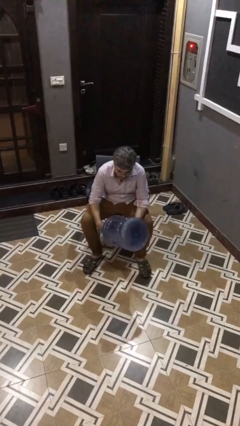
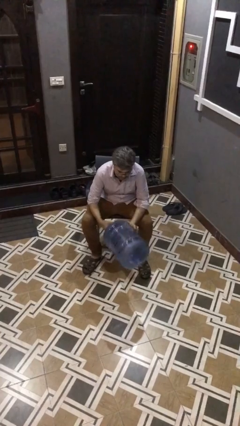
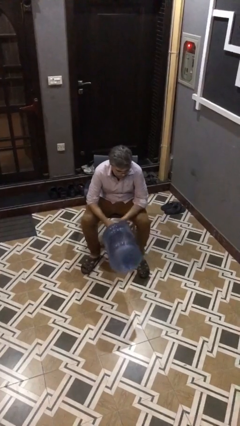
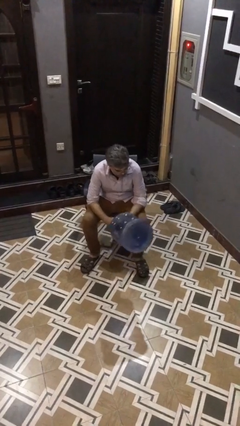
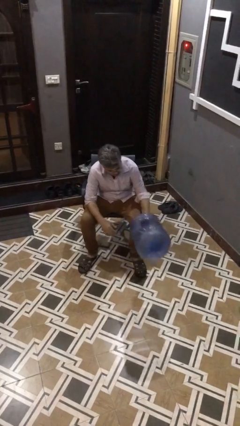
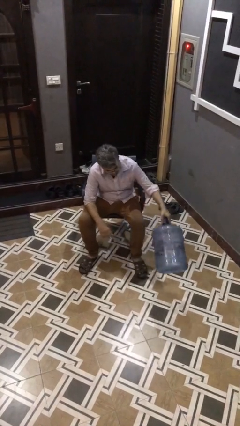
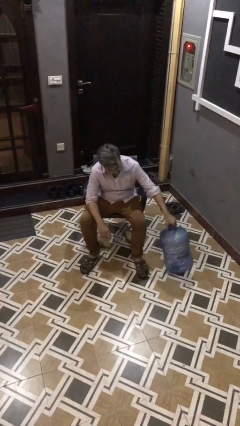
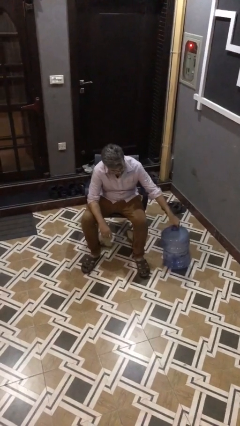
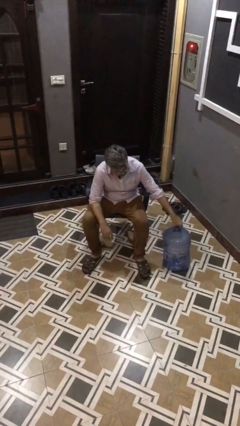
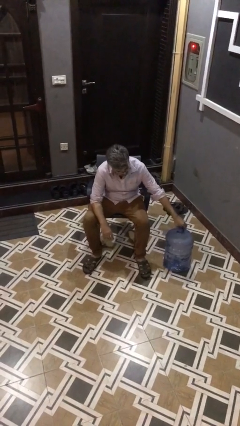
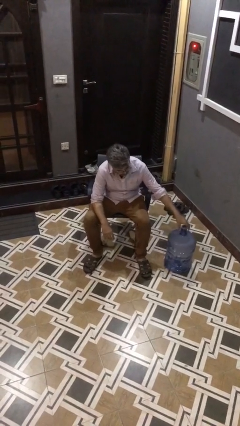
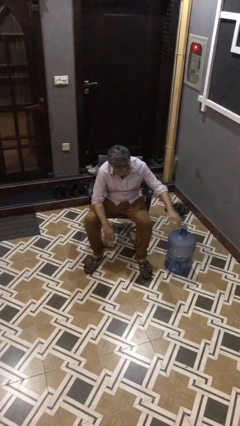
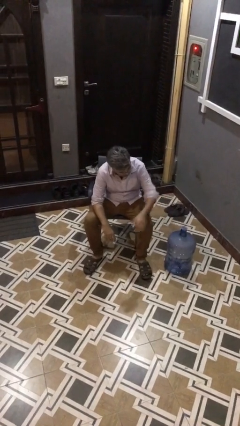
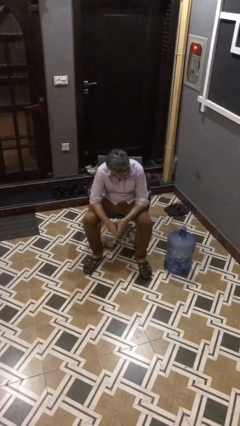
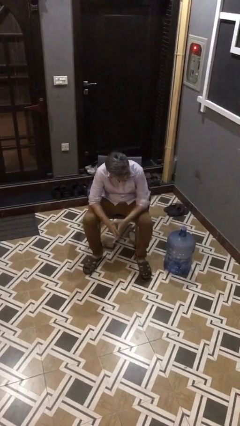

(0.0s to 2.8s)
person puts down object on floor

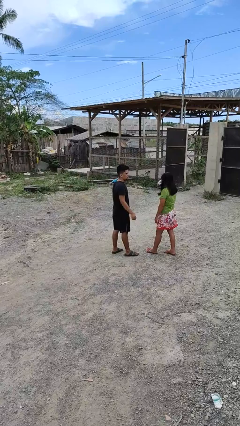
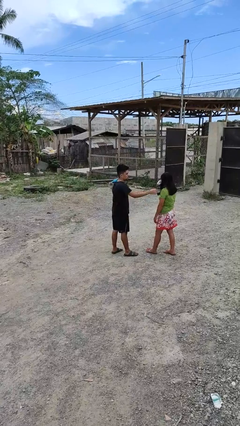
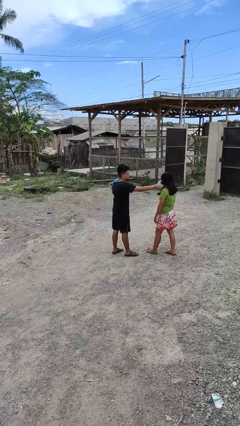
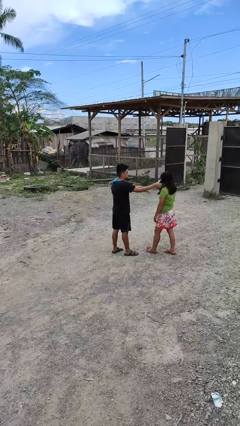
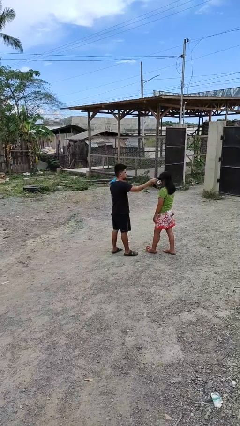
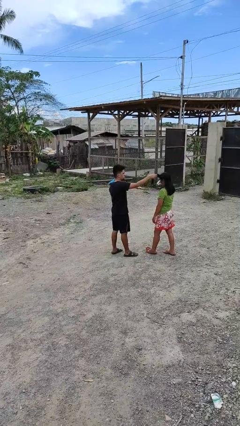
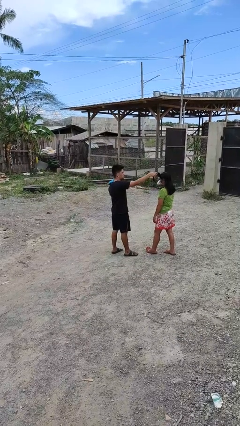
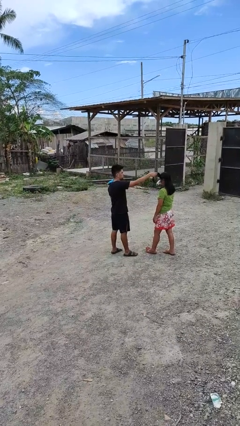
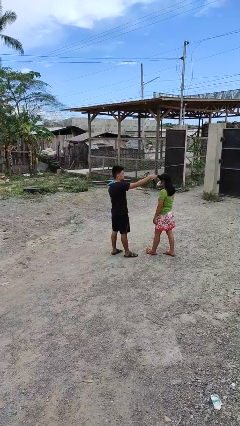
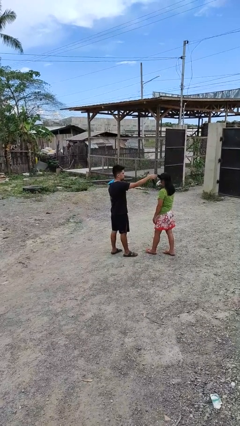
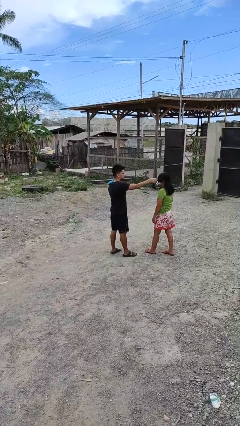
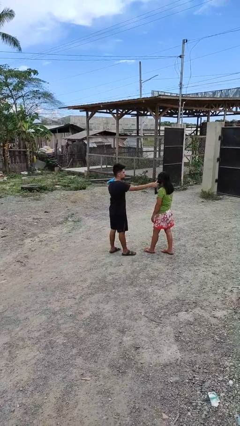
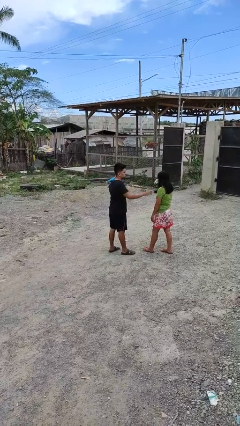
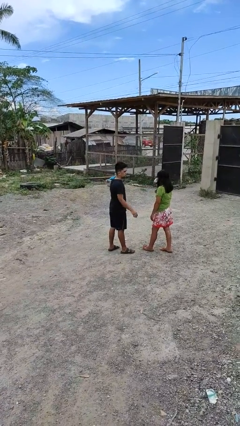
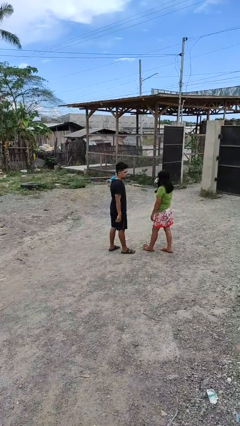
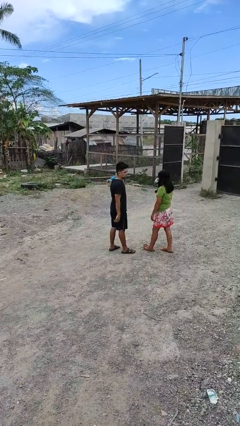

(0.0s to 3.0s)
person grabs person by hair

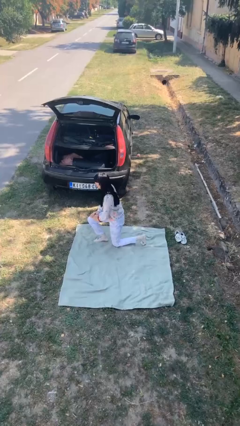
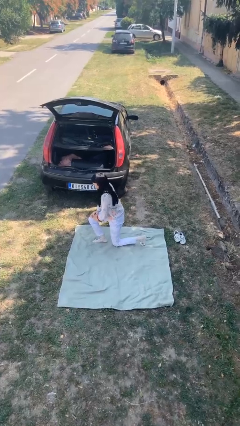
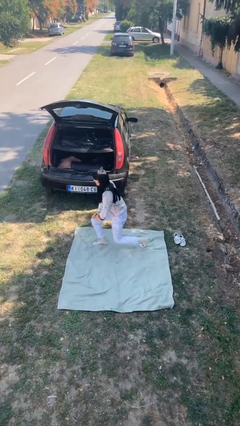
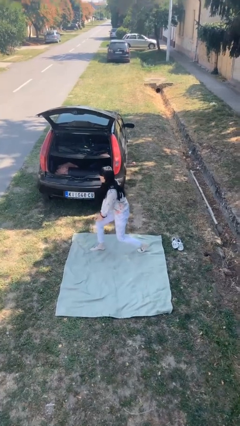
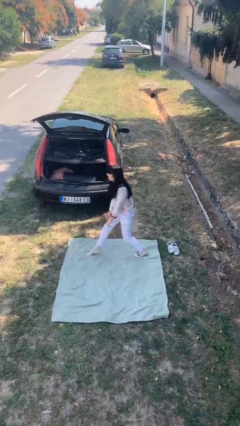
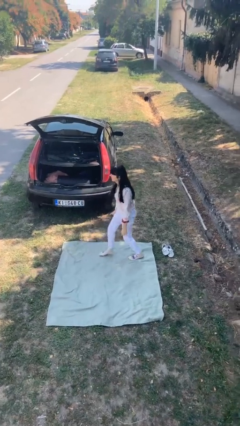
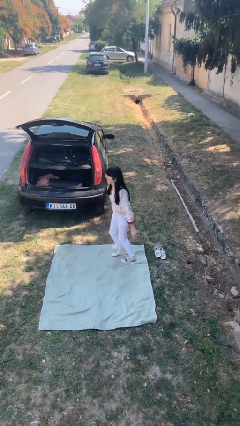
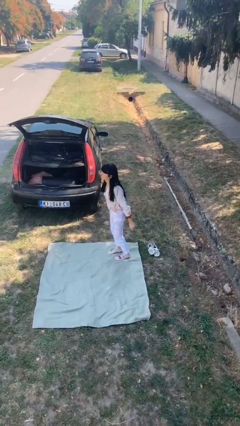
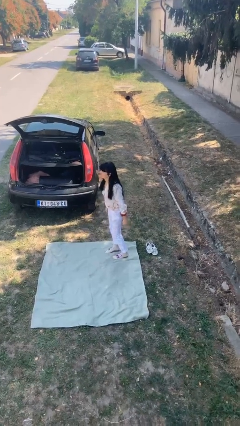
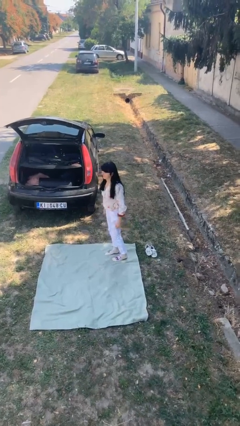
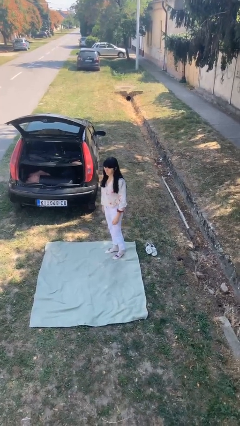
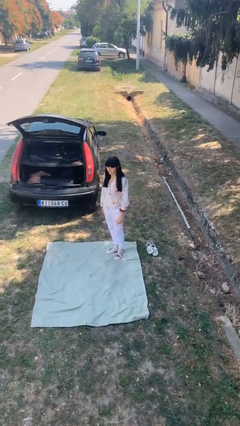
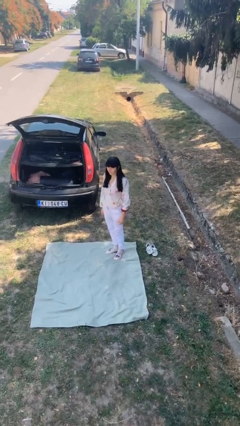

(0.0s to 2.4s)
person stands up from floor

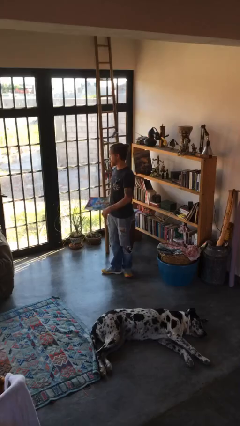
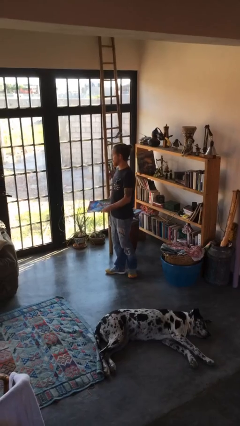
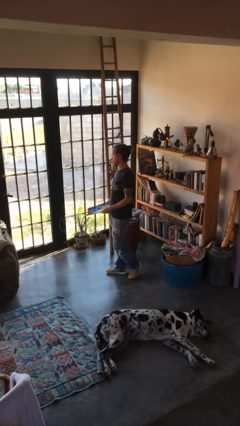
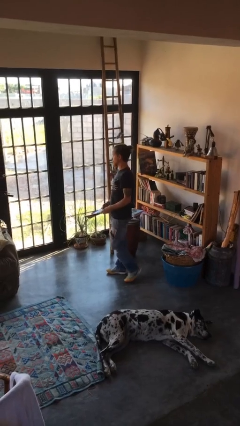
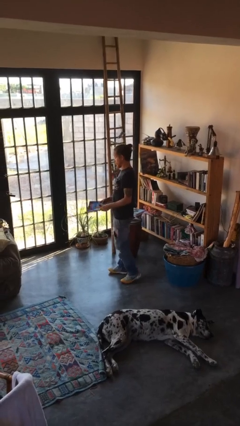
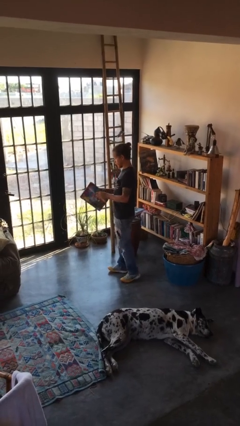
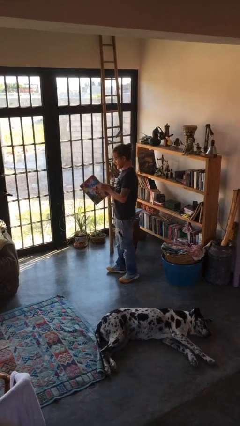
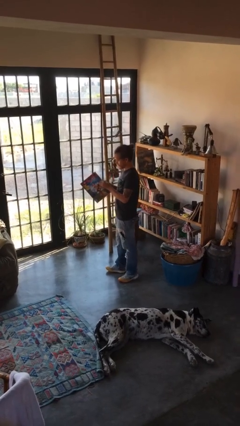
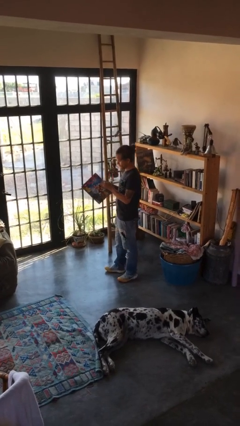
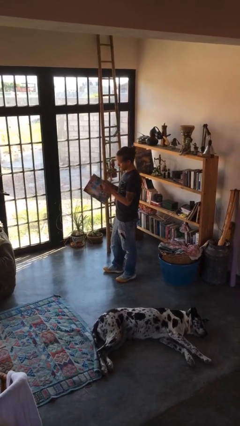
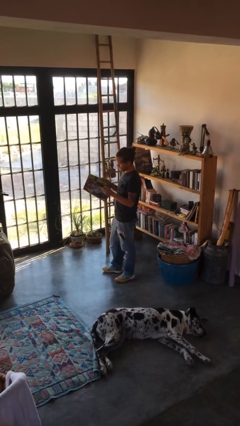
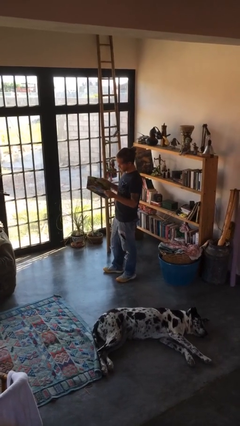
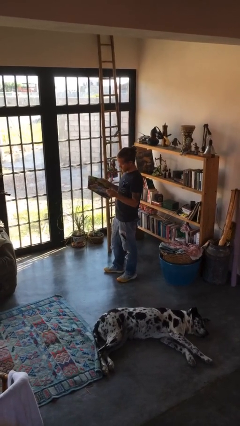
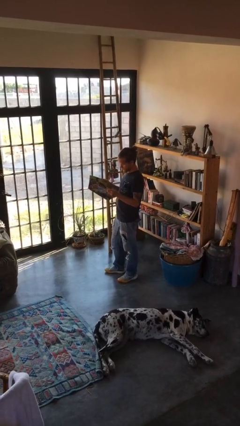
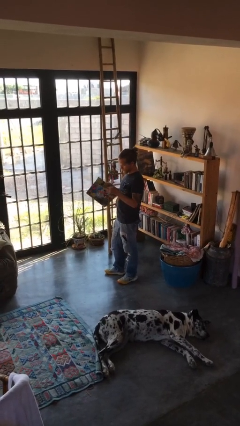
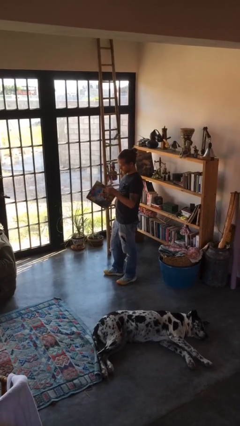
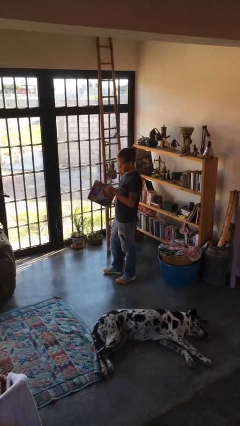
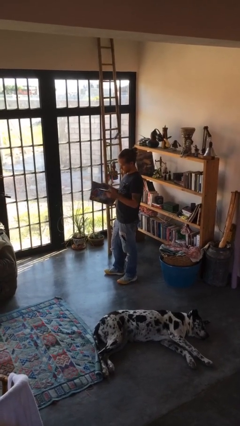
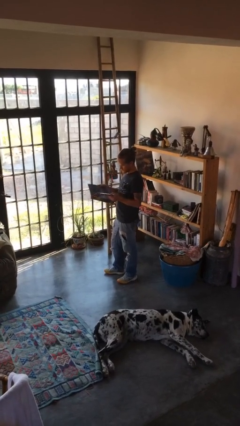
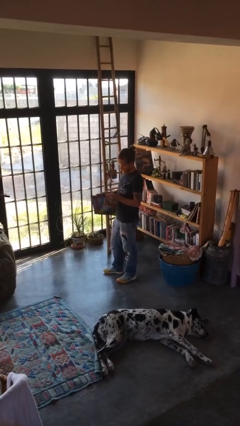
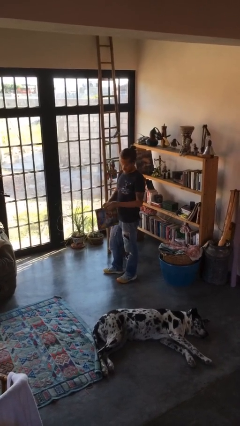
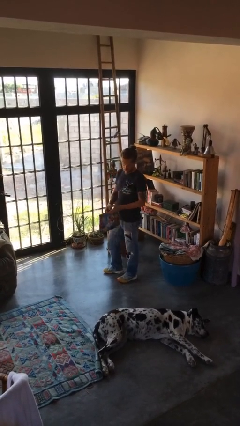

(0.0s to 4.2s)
person reads magazine

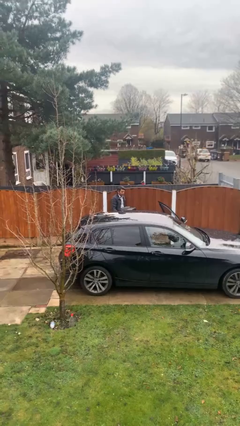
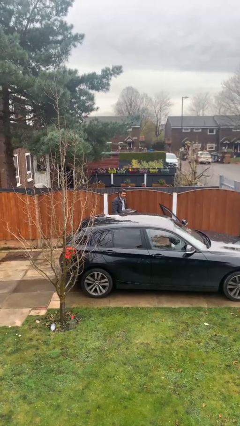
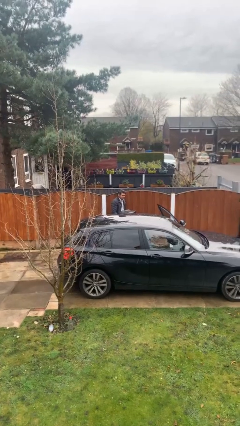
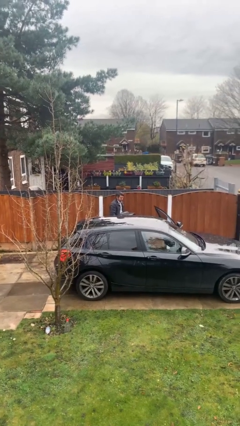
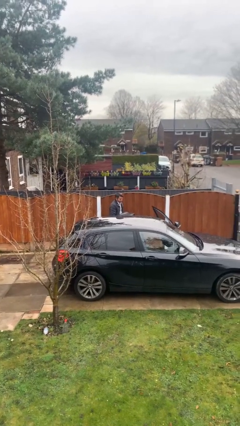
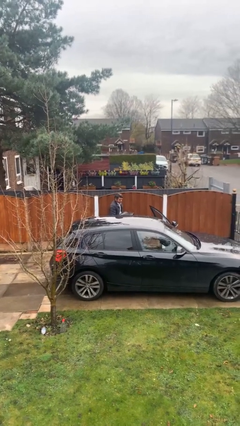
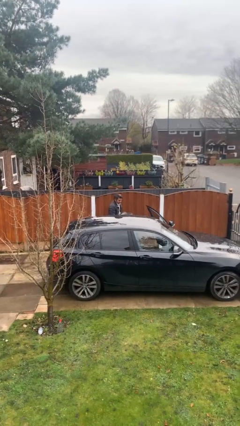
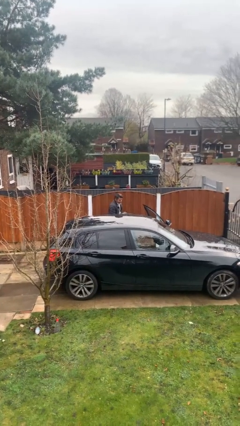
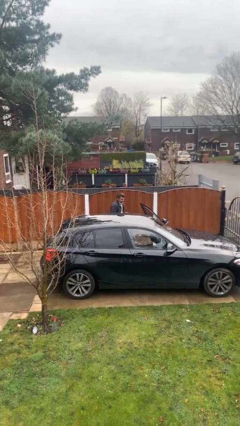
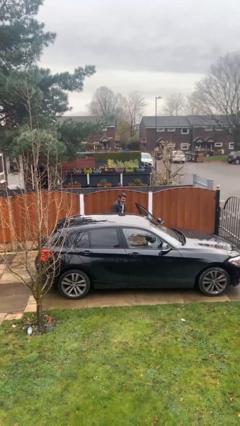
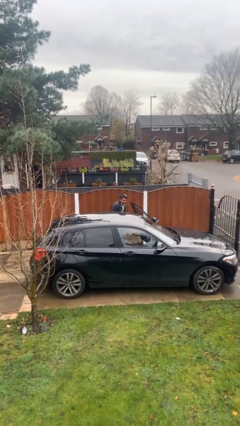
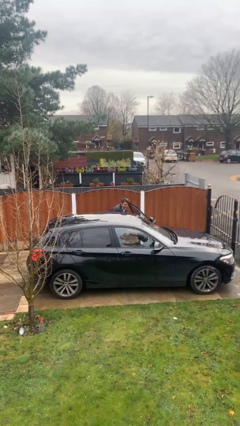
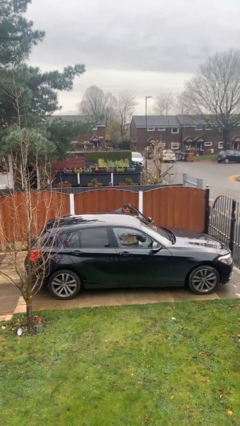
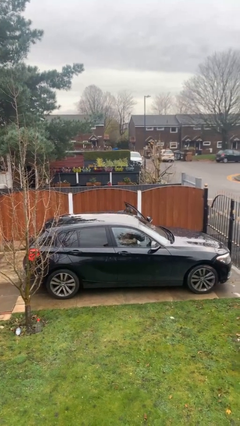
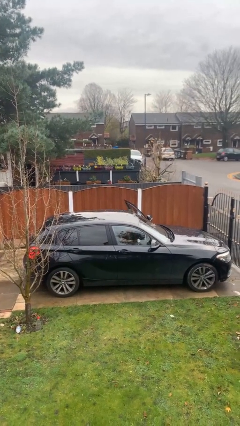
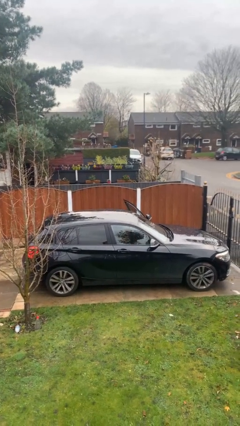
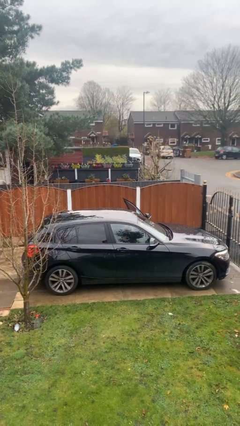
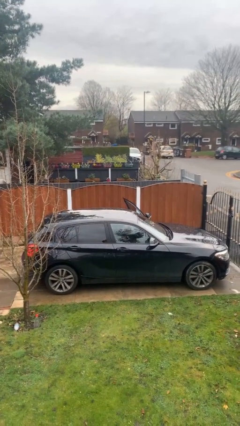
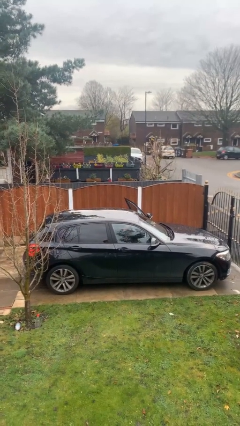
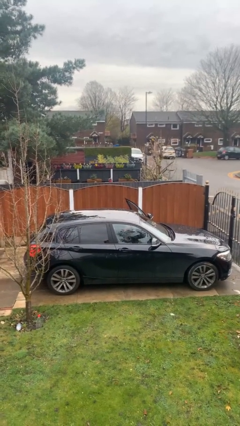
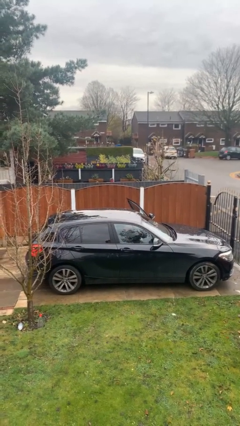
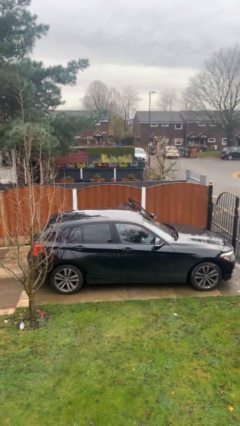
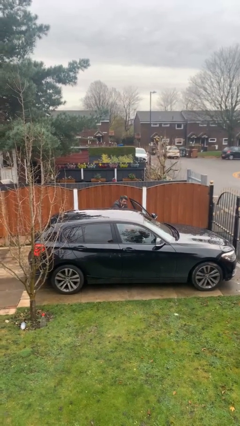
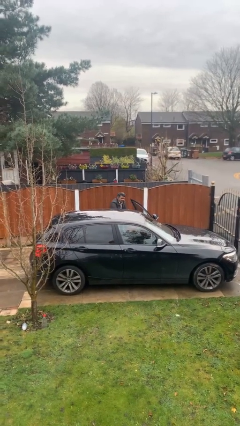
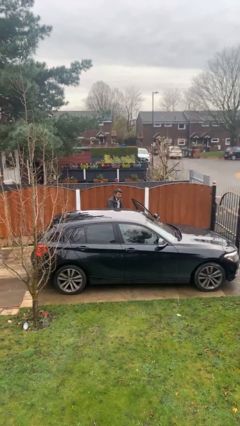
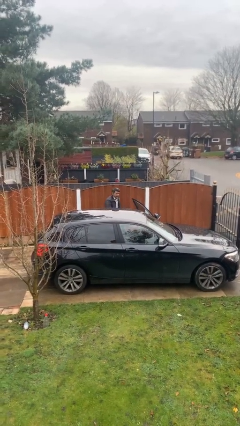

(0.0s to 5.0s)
person loads car
